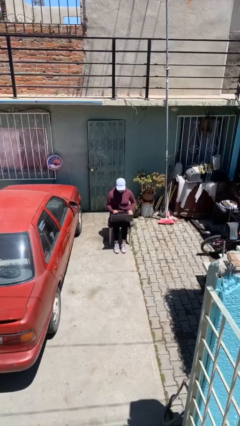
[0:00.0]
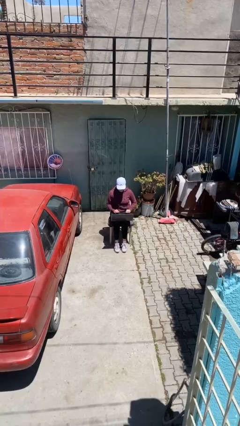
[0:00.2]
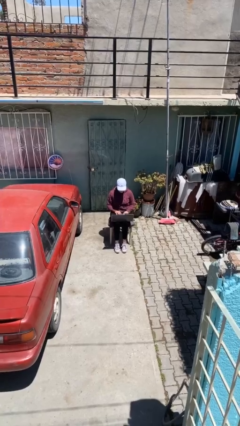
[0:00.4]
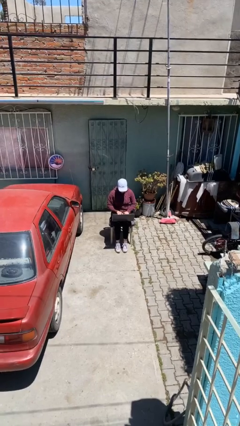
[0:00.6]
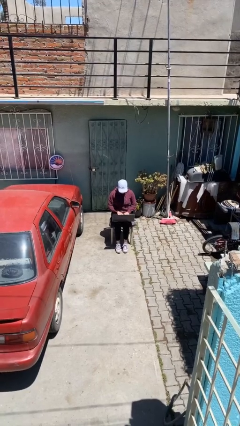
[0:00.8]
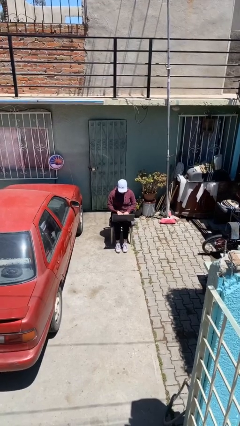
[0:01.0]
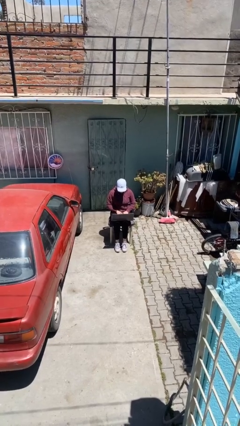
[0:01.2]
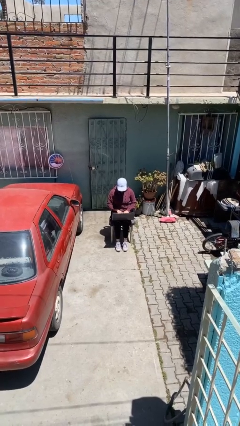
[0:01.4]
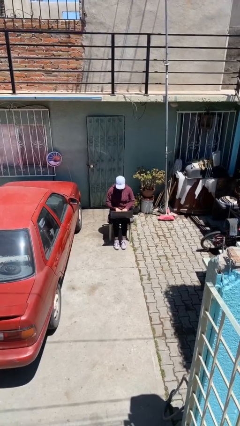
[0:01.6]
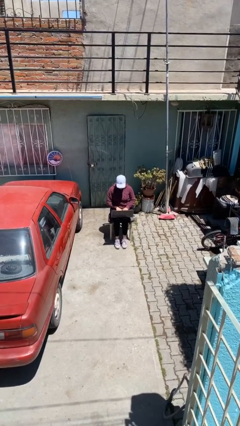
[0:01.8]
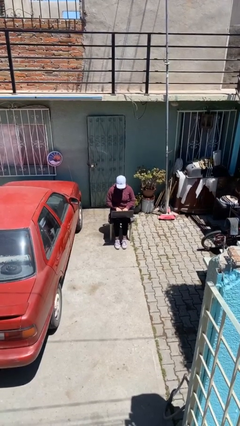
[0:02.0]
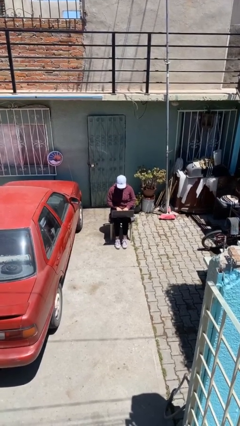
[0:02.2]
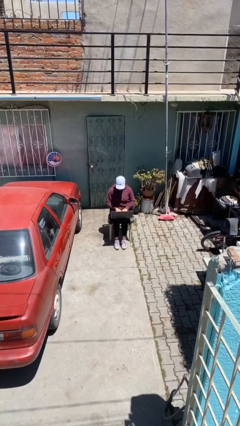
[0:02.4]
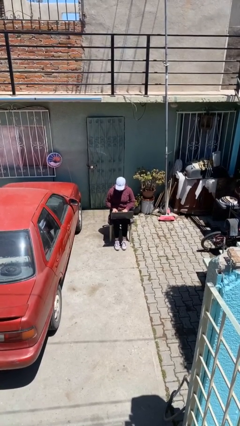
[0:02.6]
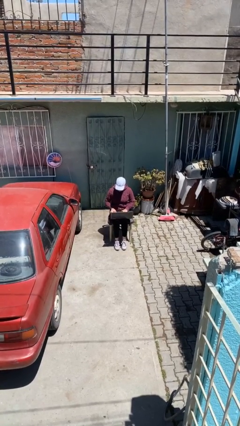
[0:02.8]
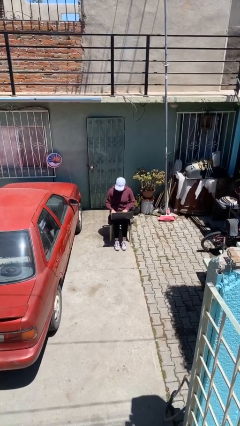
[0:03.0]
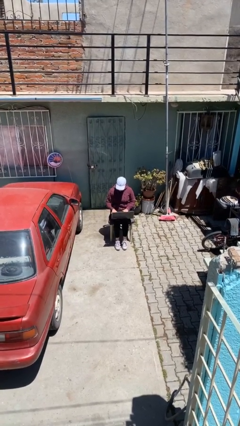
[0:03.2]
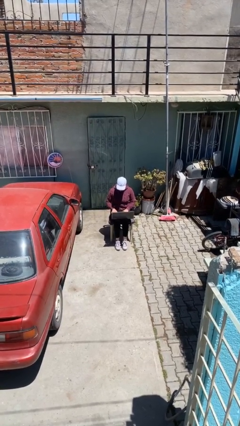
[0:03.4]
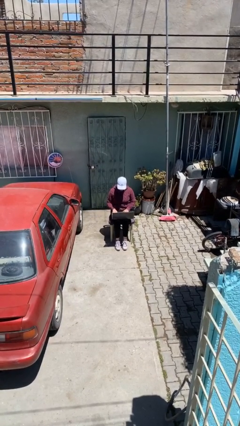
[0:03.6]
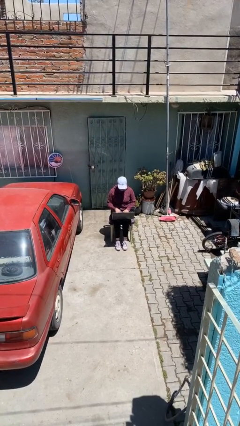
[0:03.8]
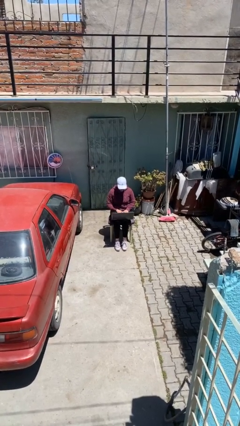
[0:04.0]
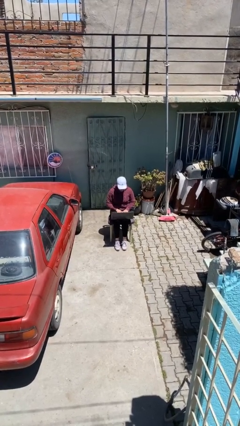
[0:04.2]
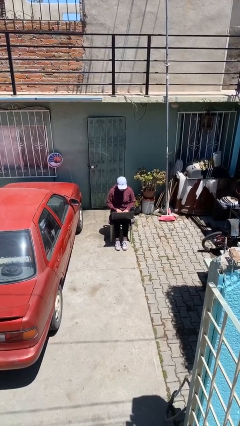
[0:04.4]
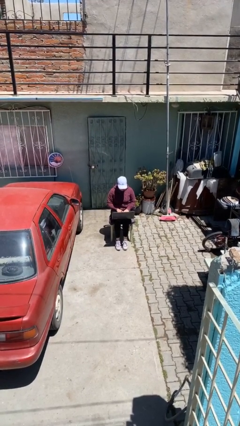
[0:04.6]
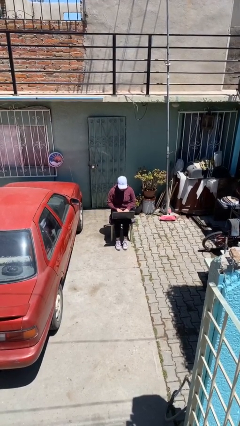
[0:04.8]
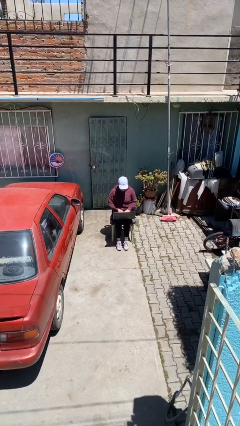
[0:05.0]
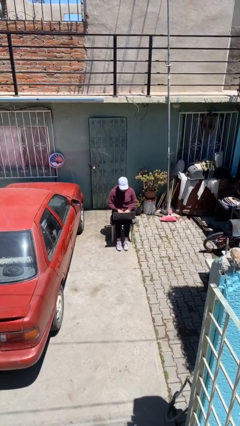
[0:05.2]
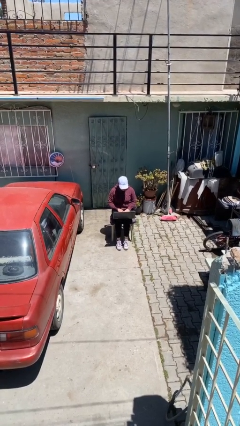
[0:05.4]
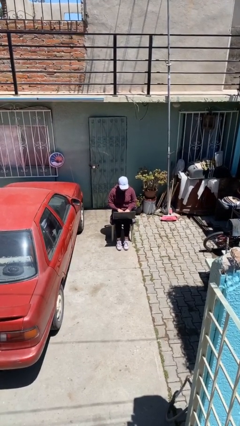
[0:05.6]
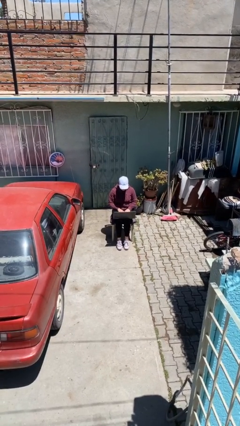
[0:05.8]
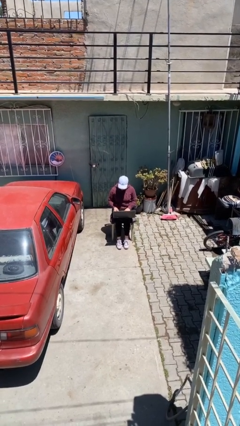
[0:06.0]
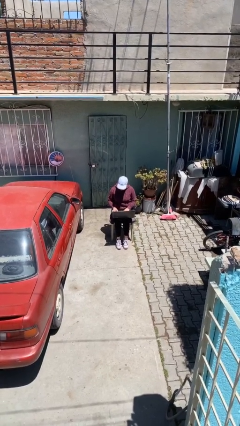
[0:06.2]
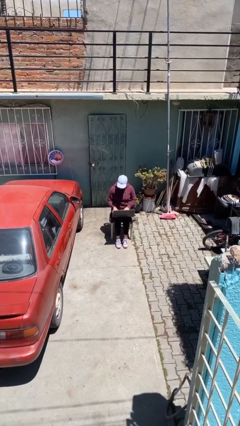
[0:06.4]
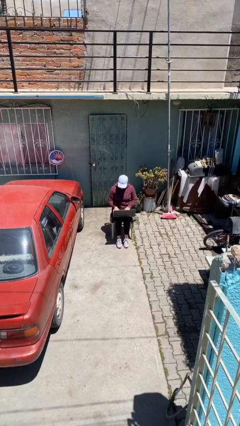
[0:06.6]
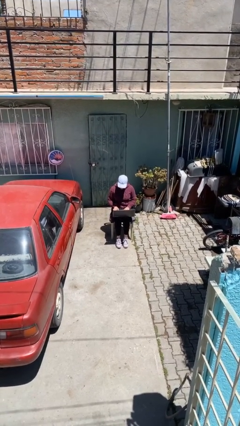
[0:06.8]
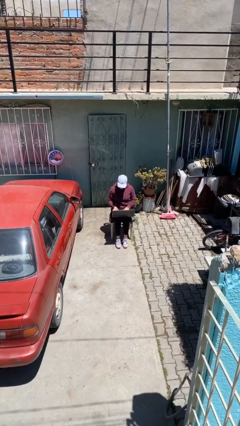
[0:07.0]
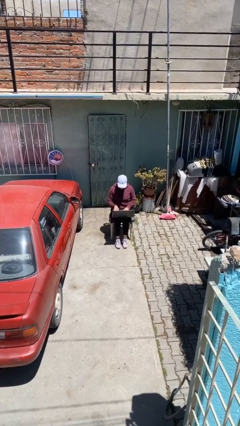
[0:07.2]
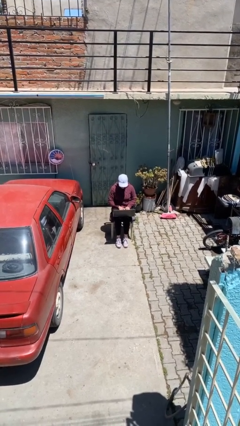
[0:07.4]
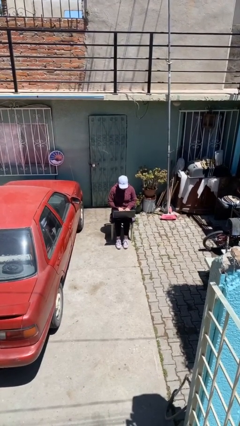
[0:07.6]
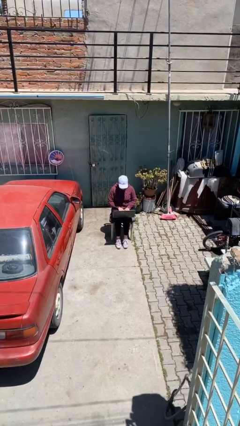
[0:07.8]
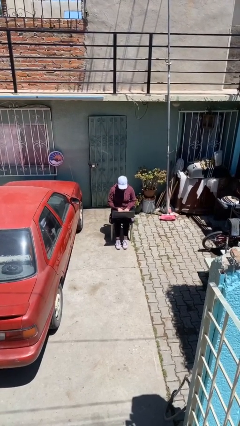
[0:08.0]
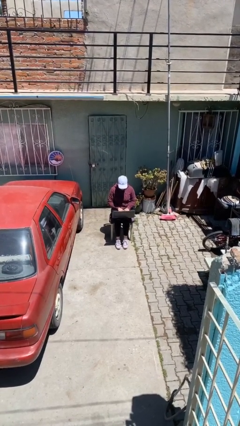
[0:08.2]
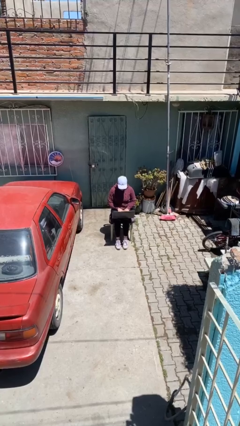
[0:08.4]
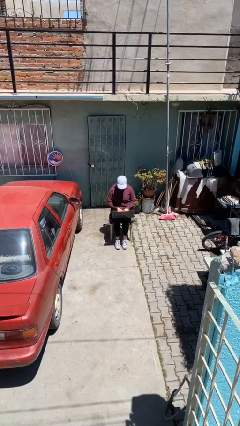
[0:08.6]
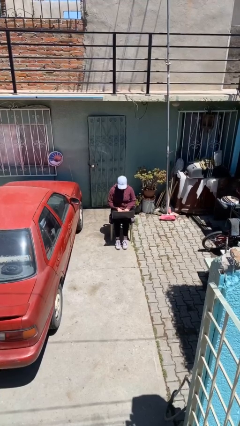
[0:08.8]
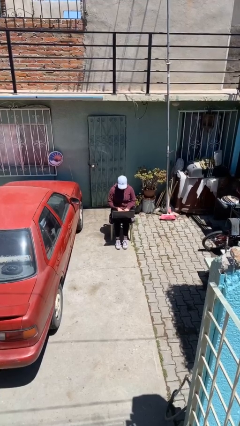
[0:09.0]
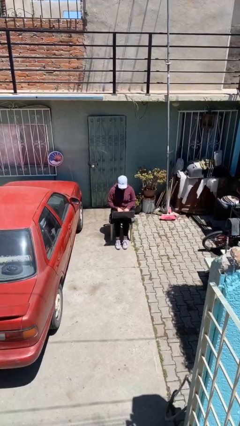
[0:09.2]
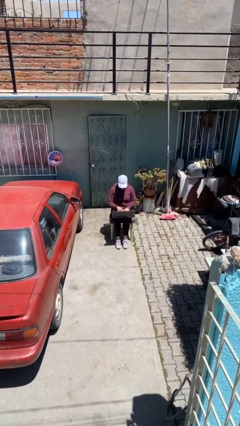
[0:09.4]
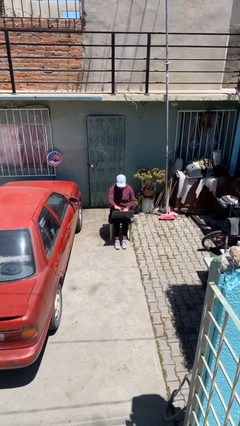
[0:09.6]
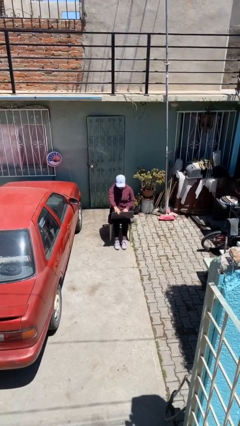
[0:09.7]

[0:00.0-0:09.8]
person interacts with laptop

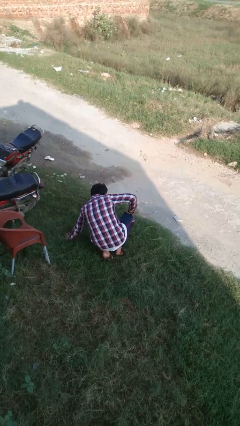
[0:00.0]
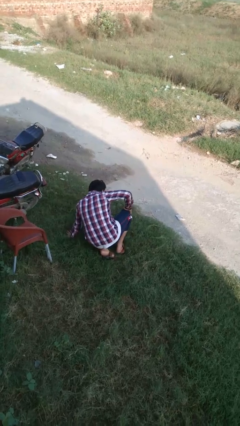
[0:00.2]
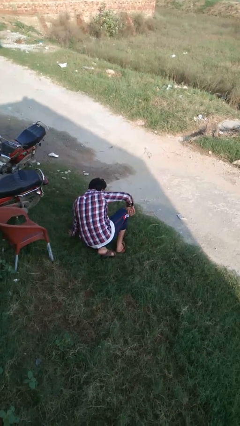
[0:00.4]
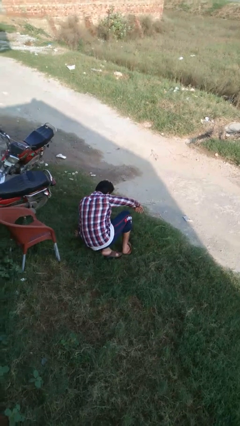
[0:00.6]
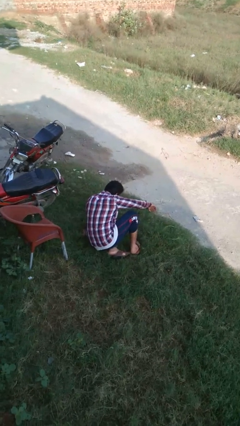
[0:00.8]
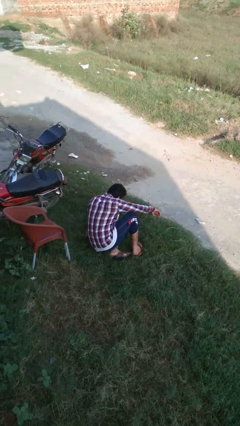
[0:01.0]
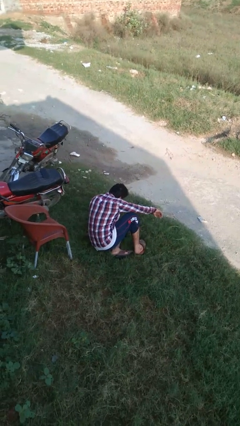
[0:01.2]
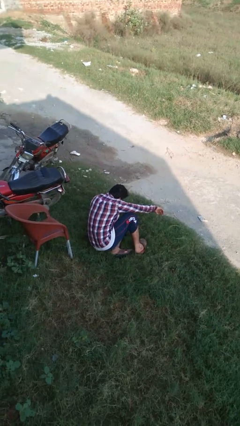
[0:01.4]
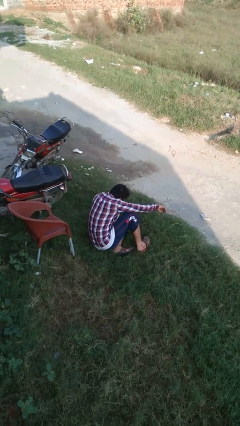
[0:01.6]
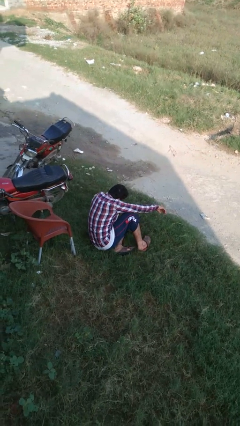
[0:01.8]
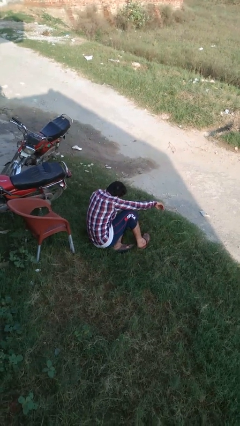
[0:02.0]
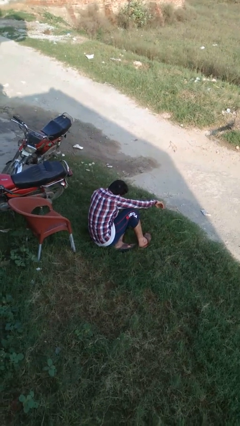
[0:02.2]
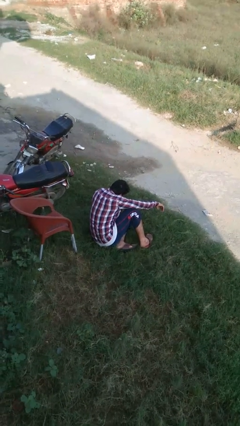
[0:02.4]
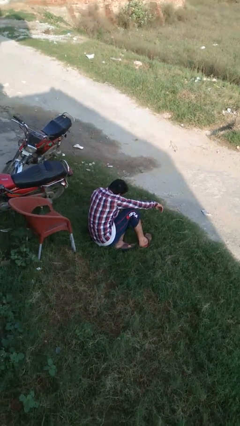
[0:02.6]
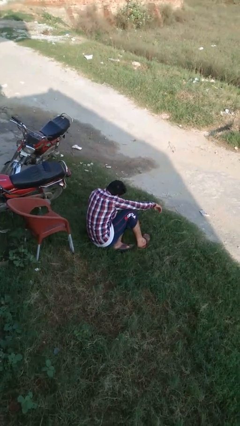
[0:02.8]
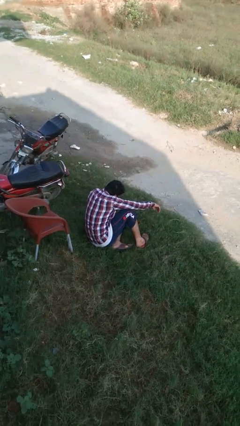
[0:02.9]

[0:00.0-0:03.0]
person lies down on floor

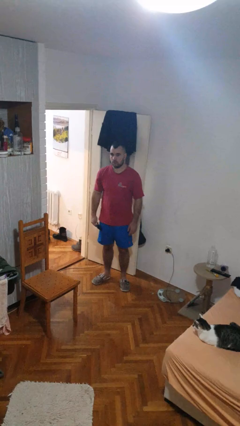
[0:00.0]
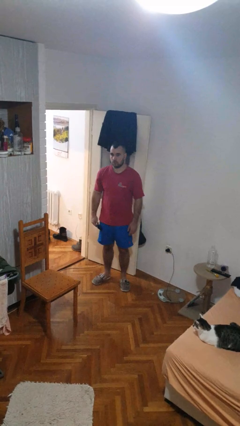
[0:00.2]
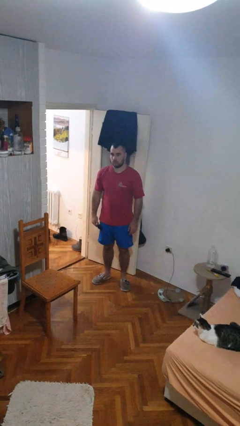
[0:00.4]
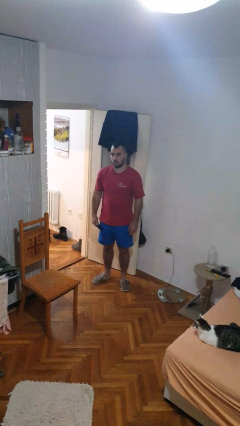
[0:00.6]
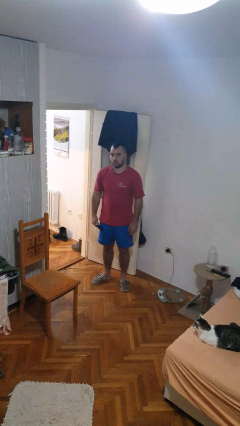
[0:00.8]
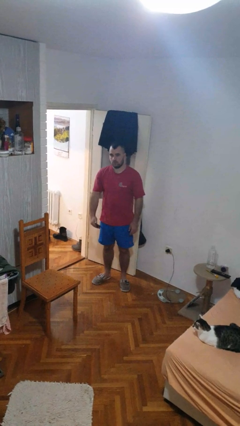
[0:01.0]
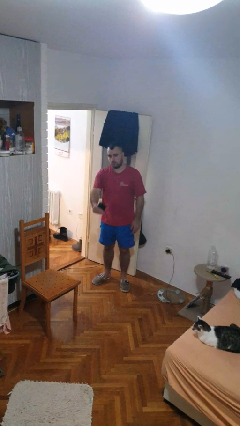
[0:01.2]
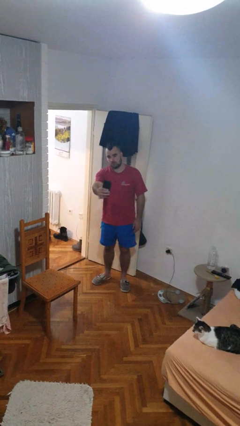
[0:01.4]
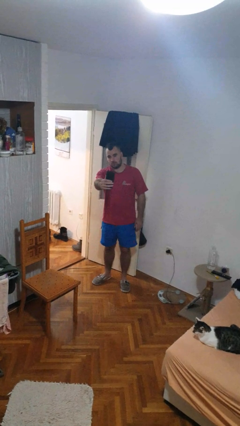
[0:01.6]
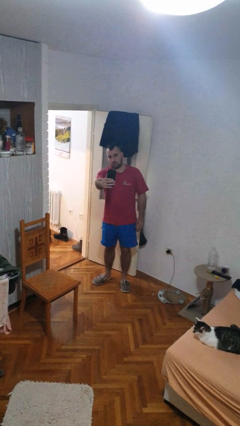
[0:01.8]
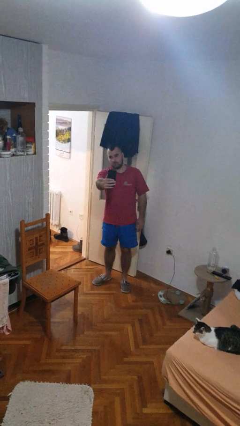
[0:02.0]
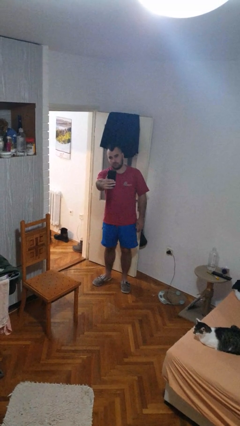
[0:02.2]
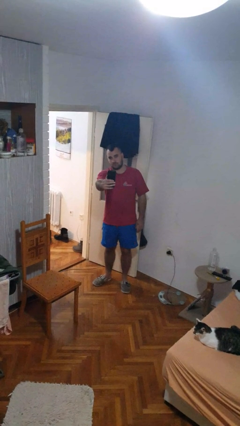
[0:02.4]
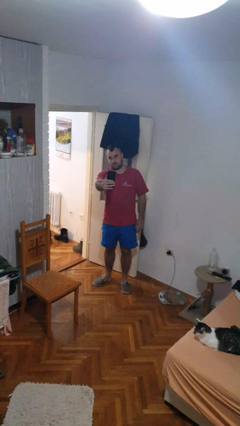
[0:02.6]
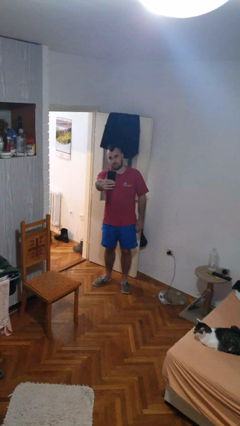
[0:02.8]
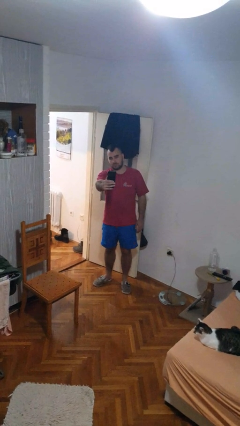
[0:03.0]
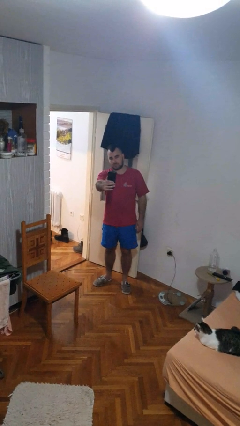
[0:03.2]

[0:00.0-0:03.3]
person takes selfie

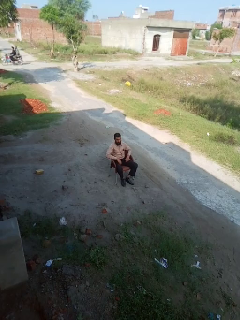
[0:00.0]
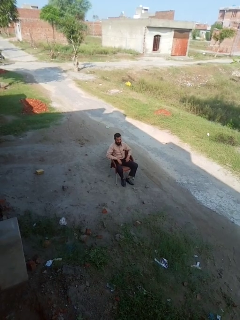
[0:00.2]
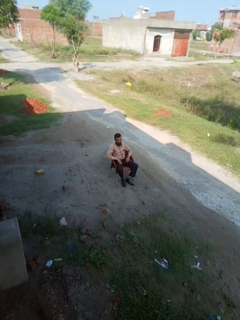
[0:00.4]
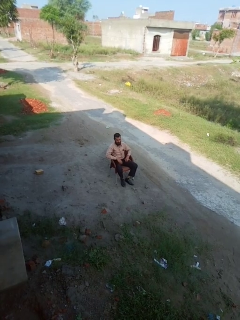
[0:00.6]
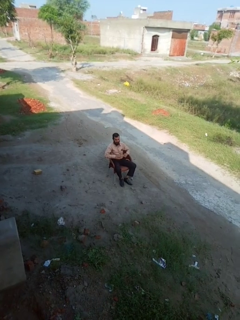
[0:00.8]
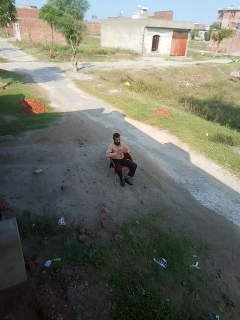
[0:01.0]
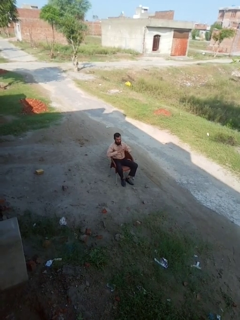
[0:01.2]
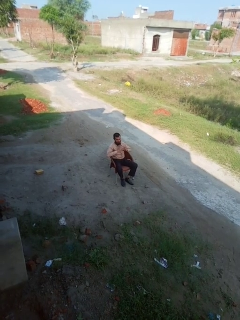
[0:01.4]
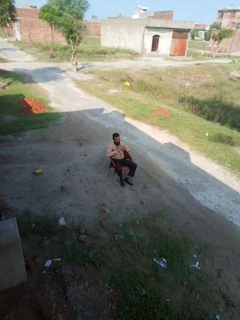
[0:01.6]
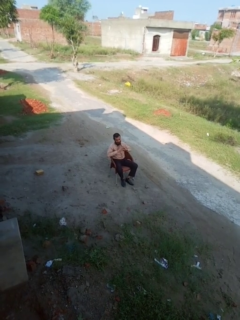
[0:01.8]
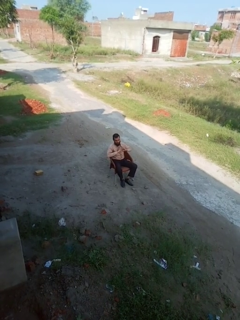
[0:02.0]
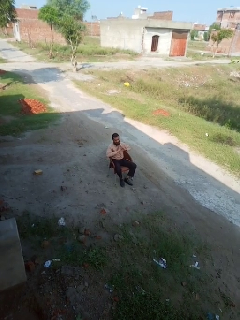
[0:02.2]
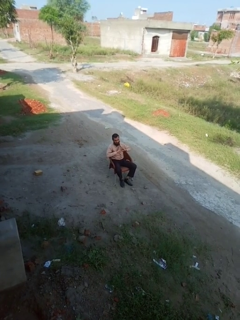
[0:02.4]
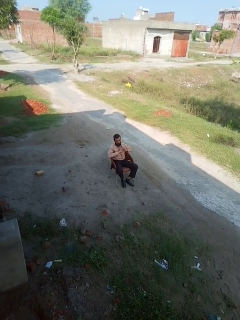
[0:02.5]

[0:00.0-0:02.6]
person gestures heart
